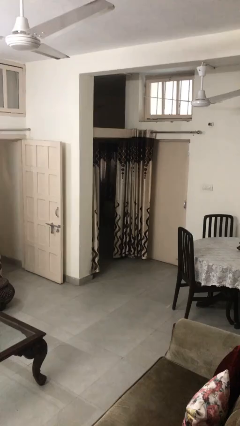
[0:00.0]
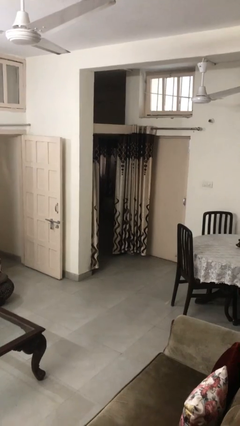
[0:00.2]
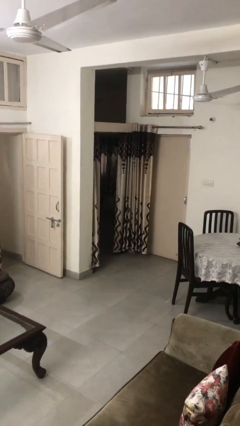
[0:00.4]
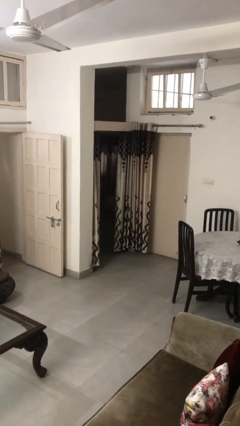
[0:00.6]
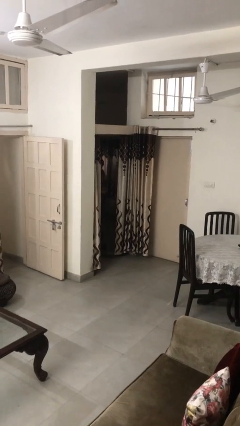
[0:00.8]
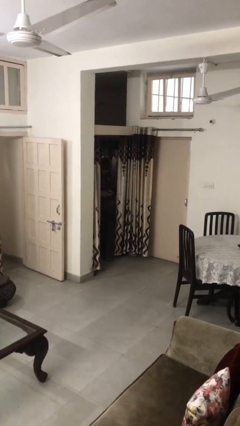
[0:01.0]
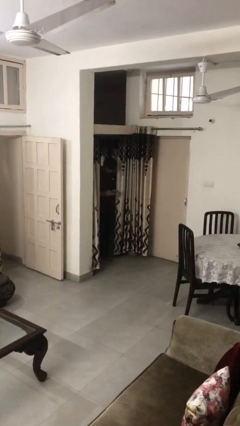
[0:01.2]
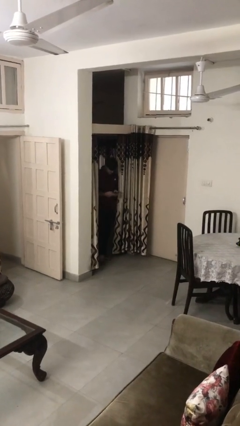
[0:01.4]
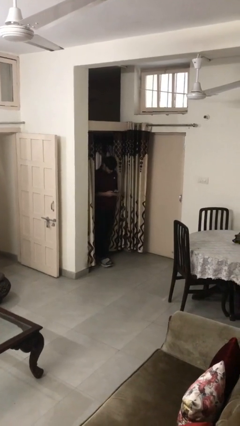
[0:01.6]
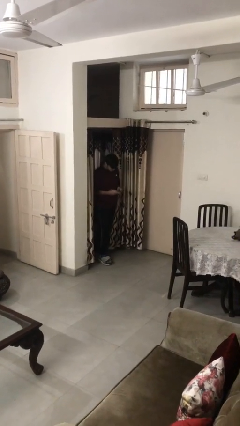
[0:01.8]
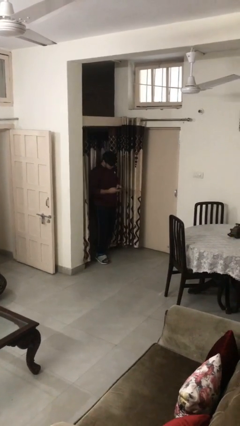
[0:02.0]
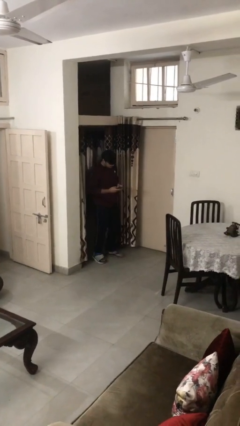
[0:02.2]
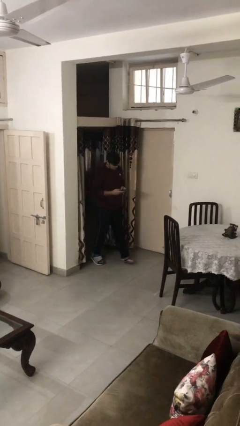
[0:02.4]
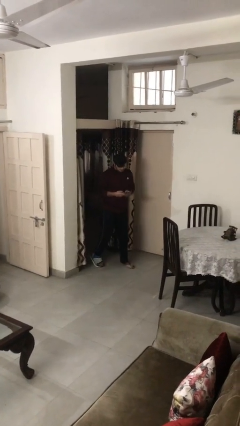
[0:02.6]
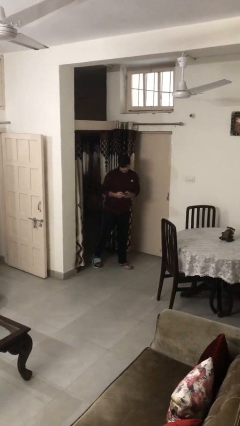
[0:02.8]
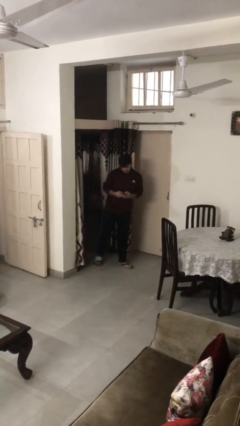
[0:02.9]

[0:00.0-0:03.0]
person enters scene through structure

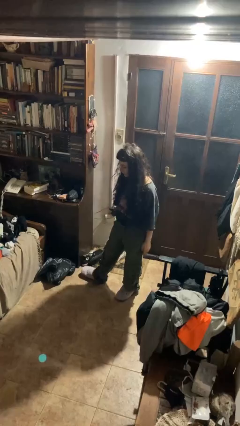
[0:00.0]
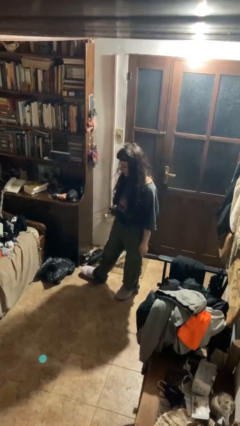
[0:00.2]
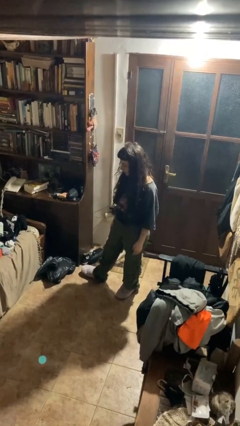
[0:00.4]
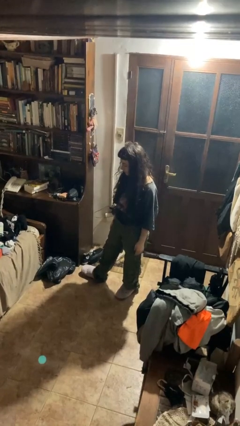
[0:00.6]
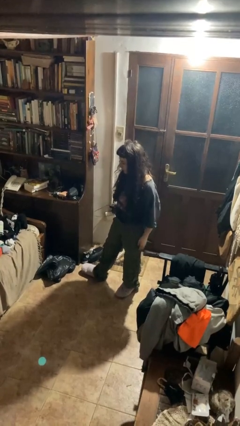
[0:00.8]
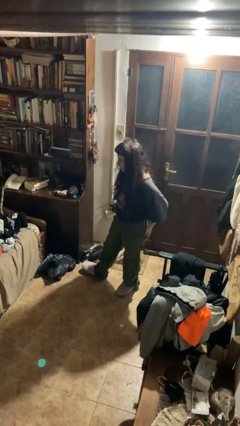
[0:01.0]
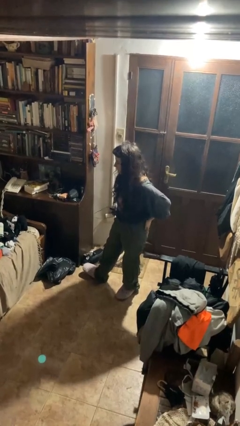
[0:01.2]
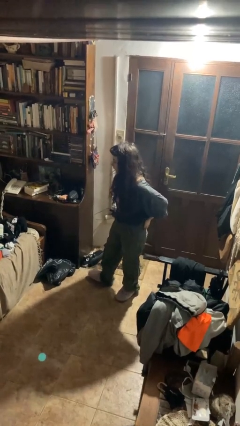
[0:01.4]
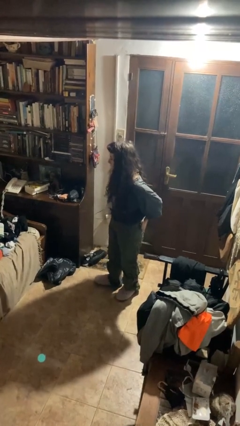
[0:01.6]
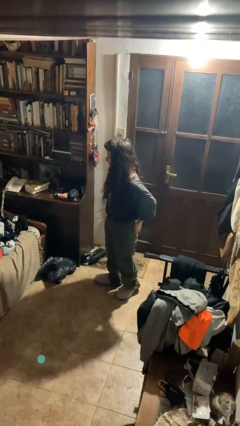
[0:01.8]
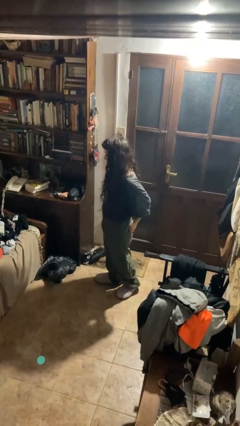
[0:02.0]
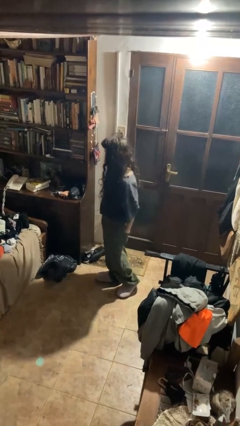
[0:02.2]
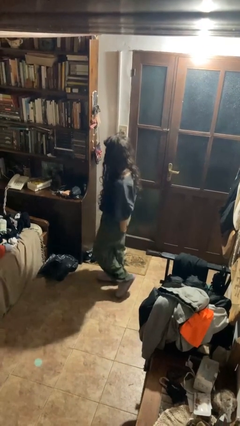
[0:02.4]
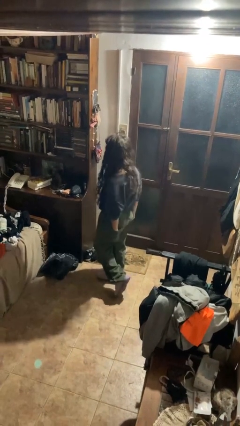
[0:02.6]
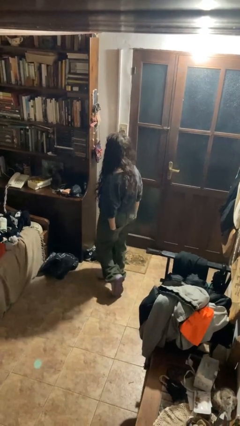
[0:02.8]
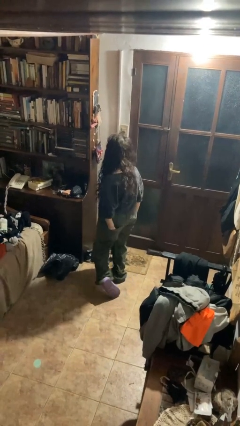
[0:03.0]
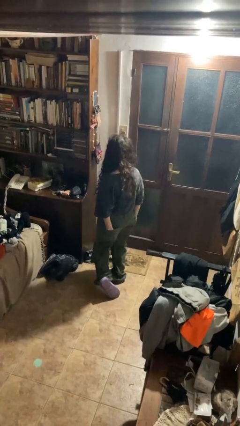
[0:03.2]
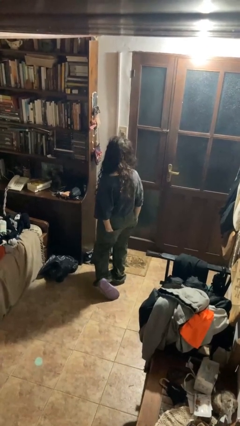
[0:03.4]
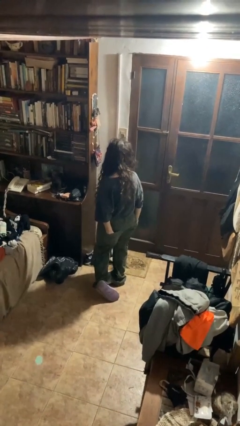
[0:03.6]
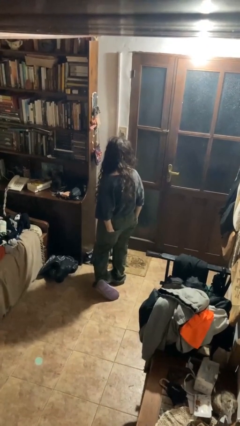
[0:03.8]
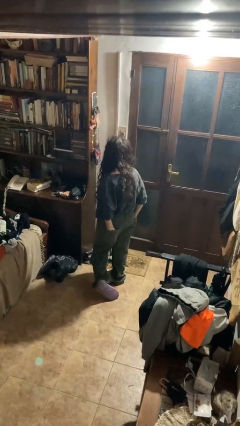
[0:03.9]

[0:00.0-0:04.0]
person puts hands in back pockets

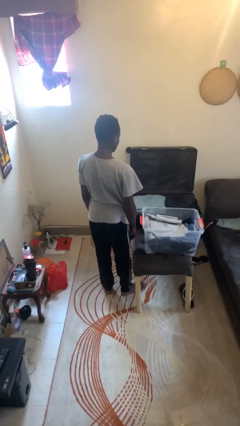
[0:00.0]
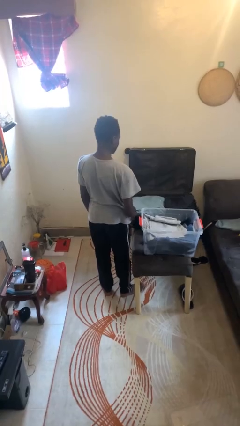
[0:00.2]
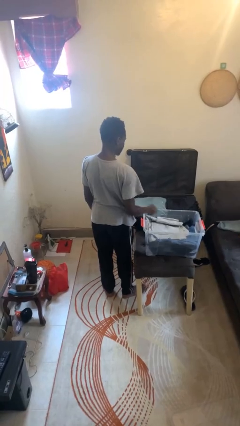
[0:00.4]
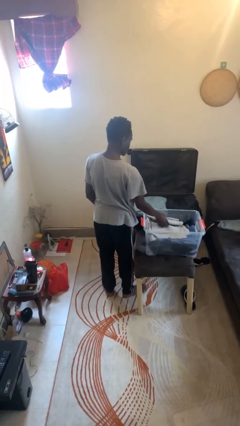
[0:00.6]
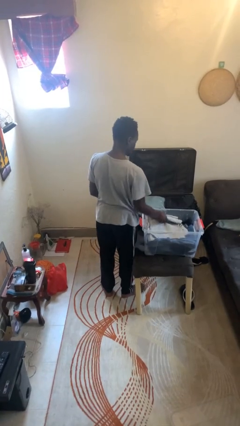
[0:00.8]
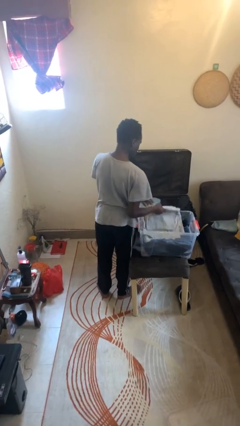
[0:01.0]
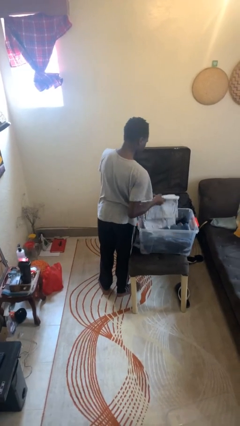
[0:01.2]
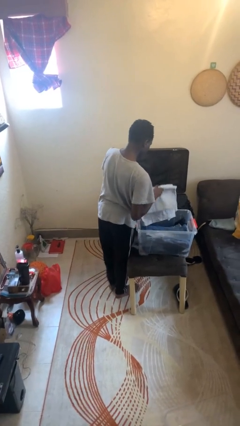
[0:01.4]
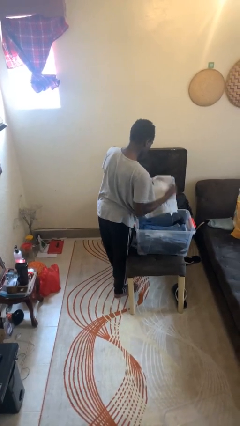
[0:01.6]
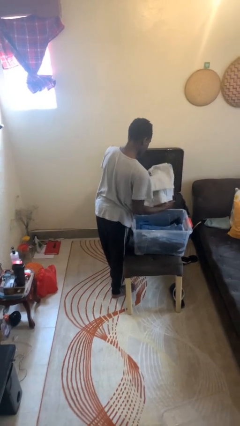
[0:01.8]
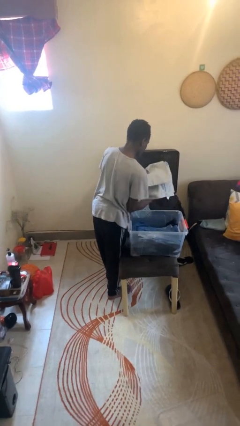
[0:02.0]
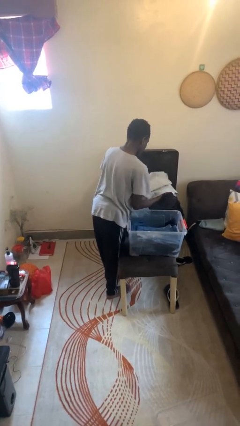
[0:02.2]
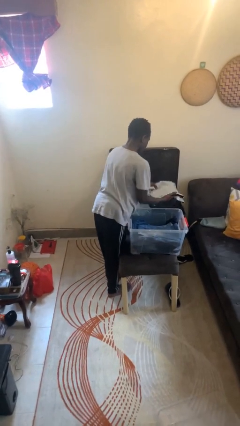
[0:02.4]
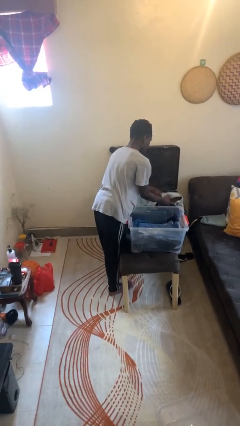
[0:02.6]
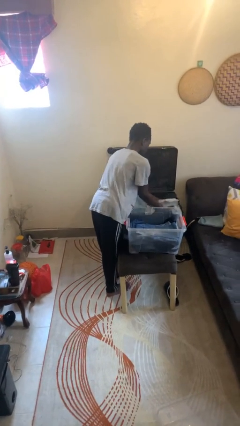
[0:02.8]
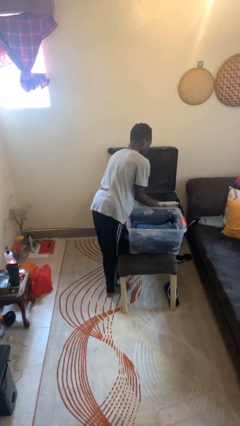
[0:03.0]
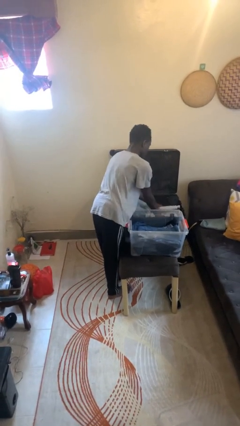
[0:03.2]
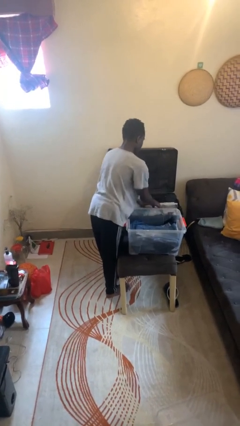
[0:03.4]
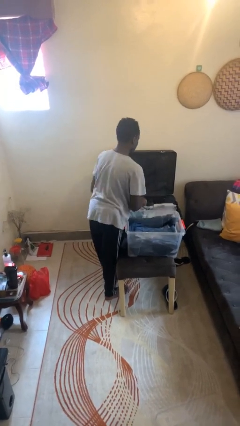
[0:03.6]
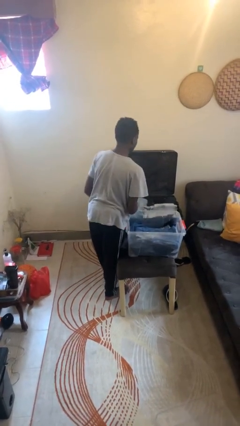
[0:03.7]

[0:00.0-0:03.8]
person loads clothes into suitcase

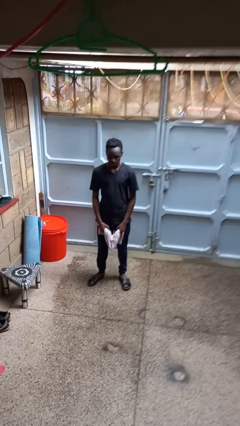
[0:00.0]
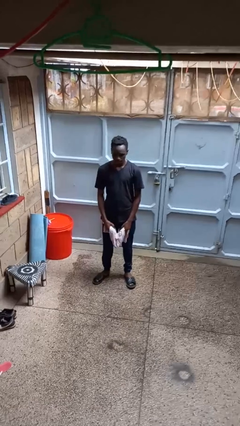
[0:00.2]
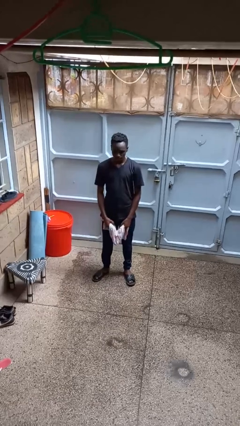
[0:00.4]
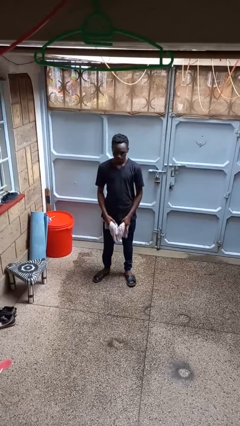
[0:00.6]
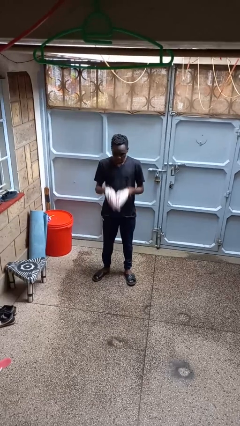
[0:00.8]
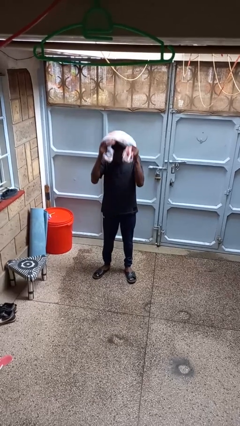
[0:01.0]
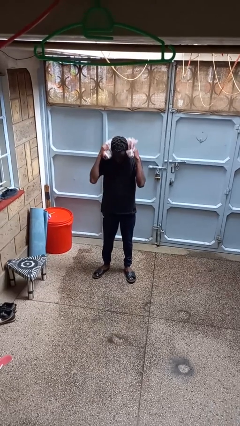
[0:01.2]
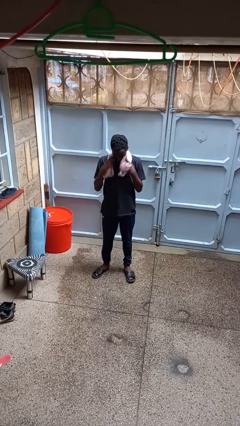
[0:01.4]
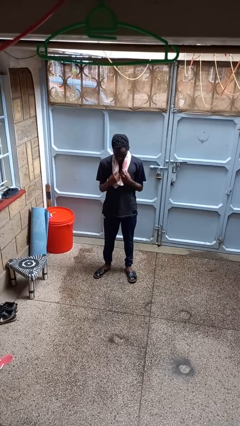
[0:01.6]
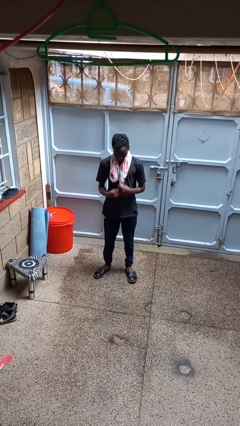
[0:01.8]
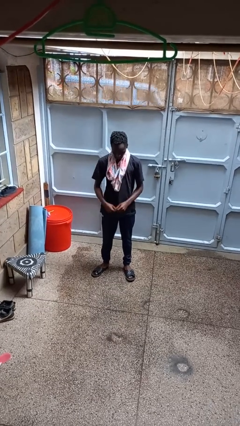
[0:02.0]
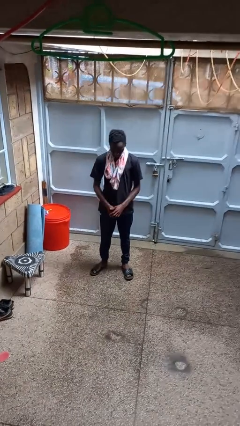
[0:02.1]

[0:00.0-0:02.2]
person puts on scarf

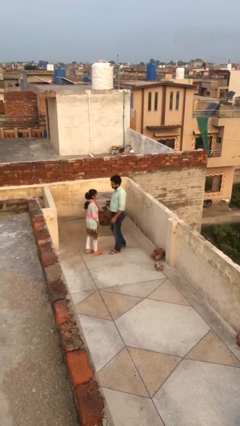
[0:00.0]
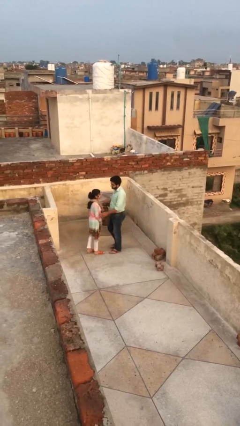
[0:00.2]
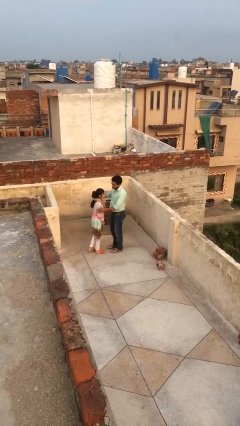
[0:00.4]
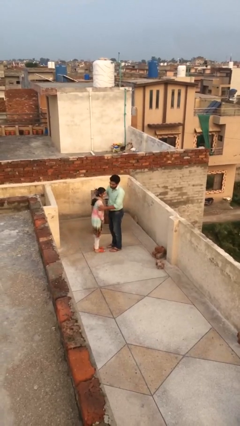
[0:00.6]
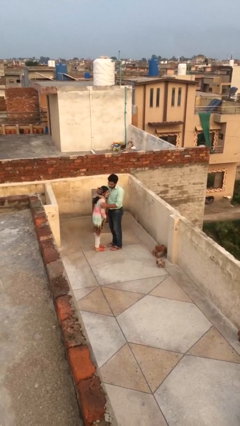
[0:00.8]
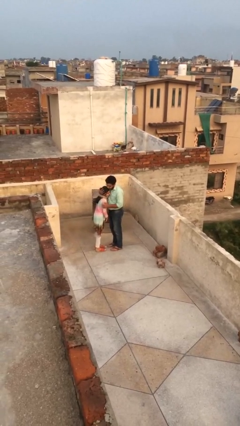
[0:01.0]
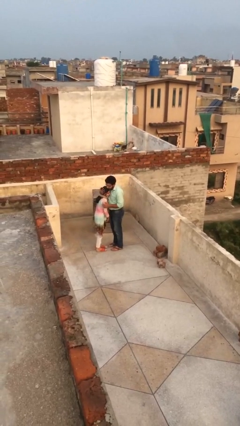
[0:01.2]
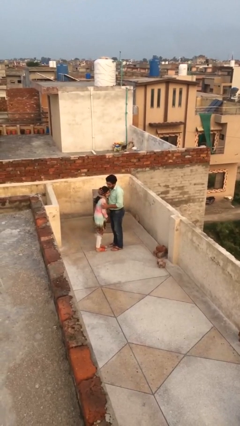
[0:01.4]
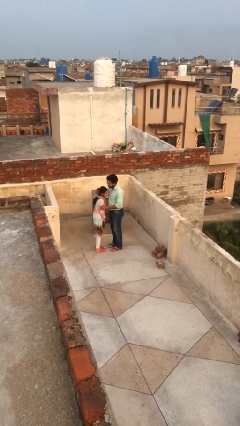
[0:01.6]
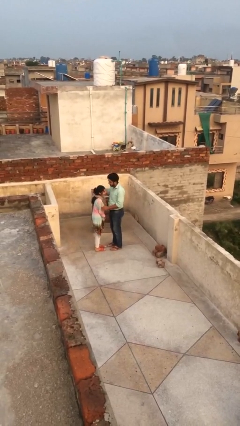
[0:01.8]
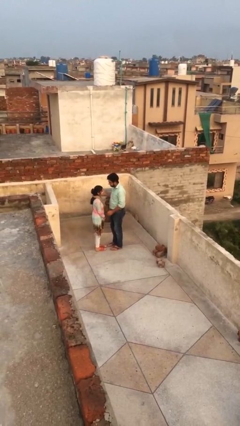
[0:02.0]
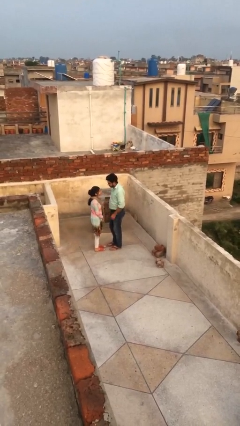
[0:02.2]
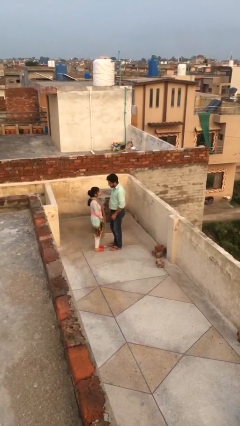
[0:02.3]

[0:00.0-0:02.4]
person embraces person

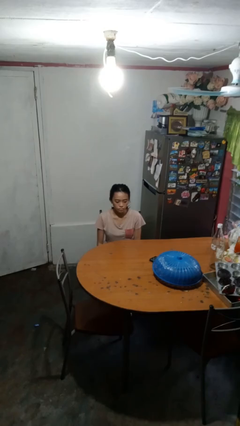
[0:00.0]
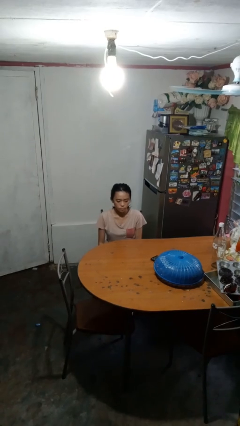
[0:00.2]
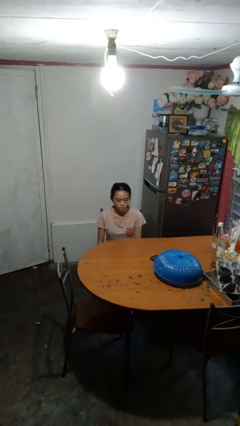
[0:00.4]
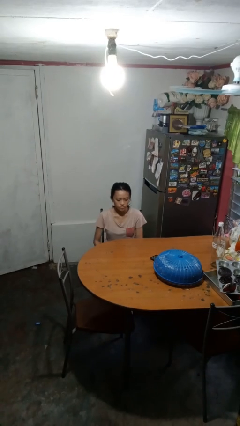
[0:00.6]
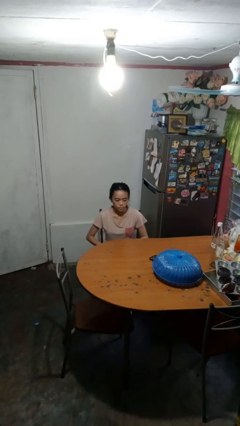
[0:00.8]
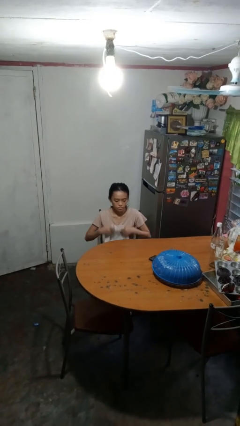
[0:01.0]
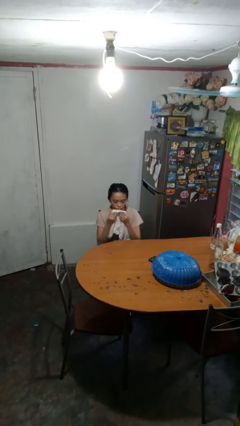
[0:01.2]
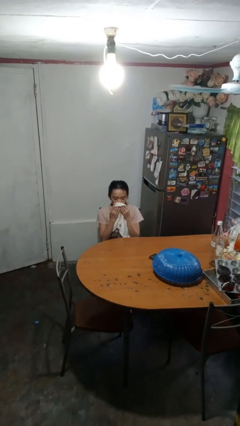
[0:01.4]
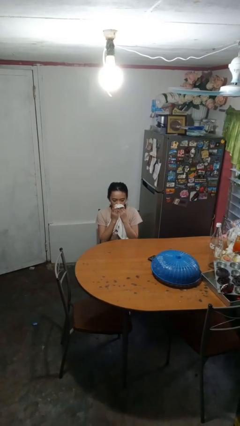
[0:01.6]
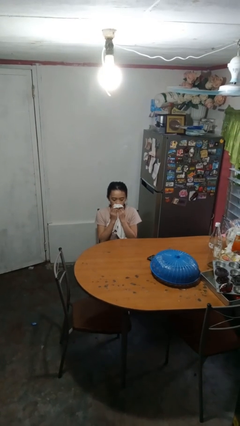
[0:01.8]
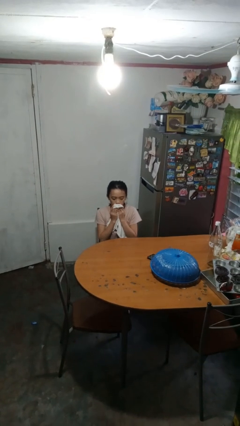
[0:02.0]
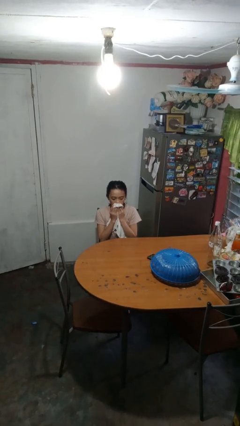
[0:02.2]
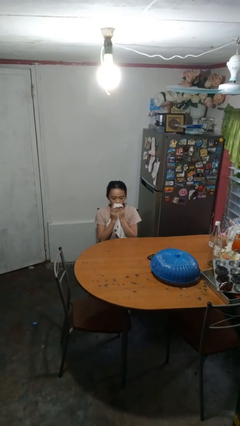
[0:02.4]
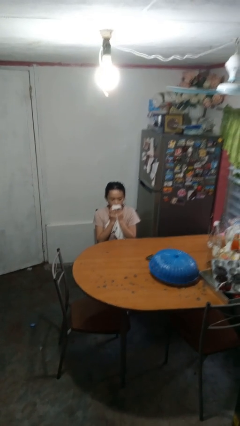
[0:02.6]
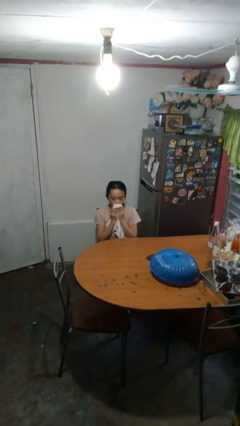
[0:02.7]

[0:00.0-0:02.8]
person wipes mouth with napkin
